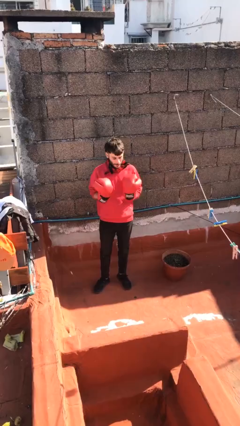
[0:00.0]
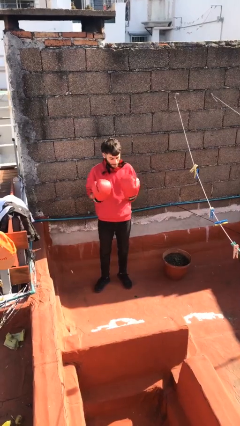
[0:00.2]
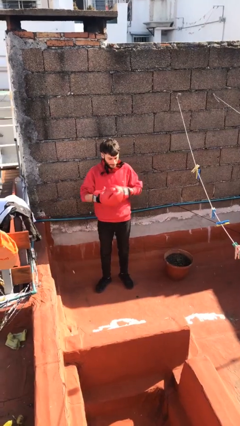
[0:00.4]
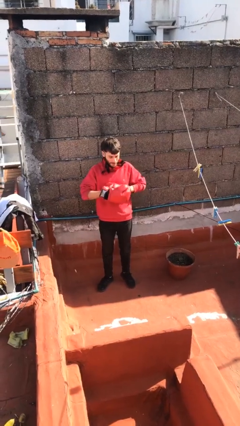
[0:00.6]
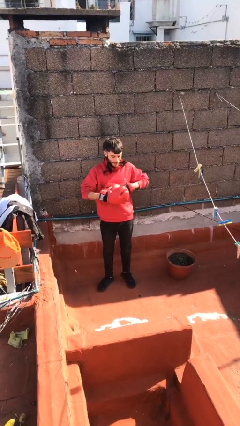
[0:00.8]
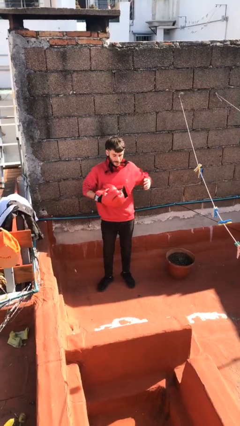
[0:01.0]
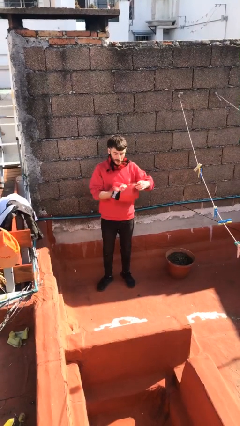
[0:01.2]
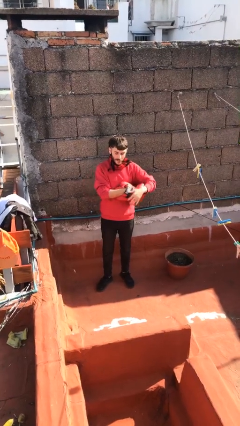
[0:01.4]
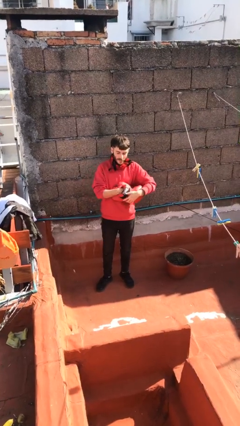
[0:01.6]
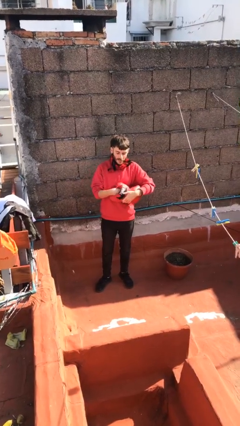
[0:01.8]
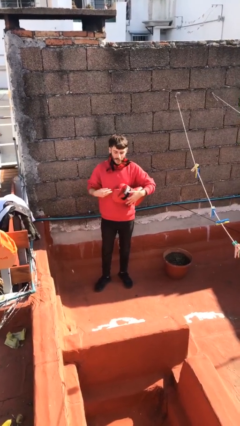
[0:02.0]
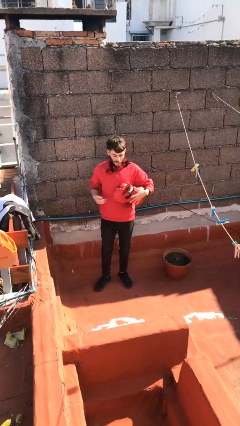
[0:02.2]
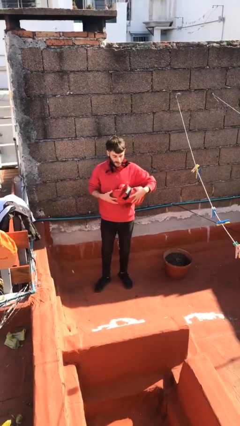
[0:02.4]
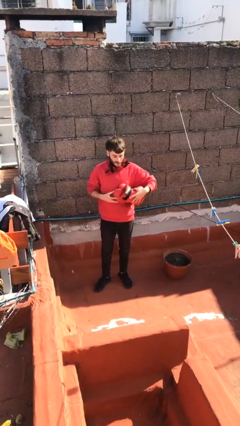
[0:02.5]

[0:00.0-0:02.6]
person takes off gloves

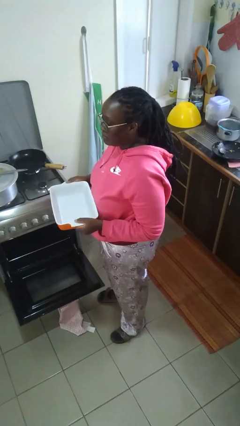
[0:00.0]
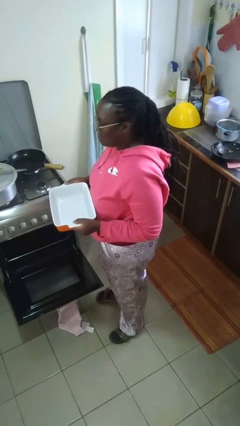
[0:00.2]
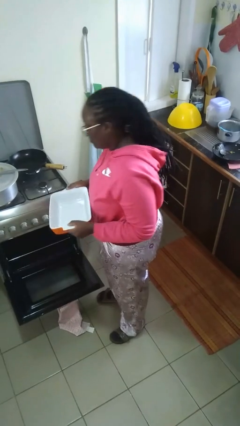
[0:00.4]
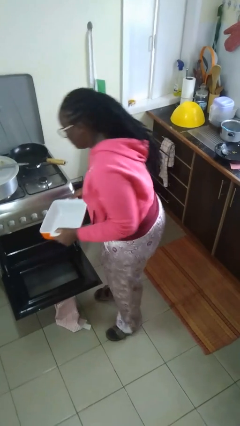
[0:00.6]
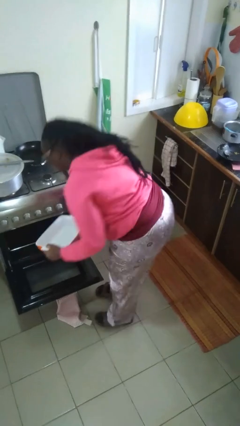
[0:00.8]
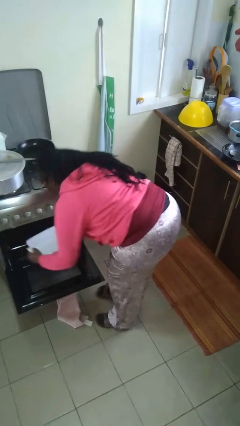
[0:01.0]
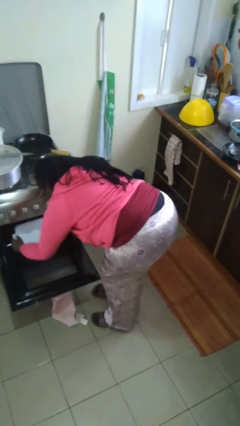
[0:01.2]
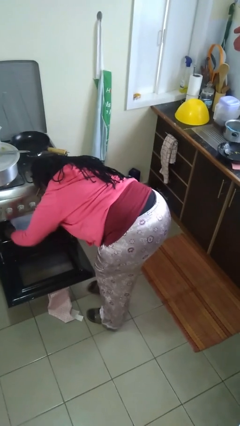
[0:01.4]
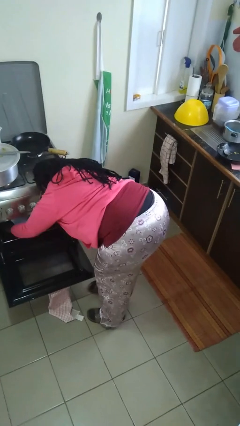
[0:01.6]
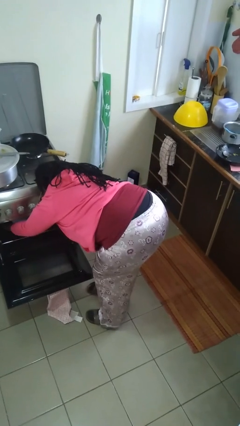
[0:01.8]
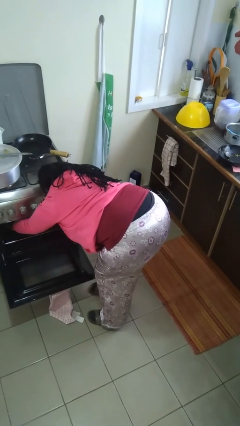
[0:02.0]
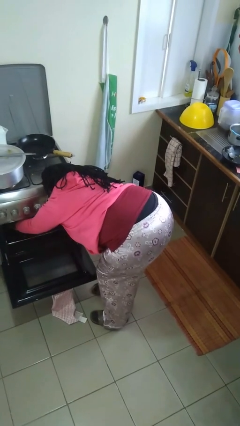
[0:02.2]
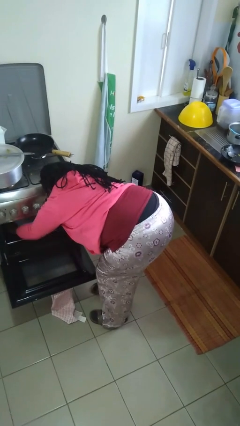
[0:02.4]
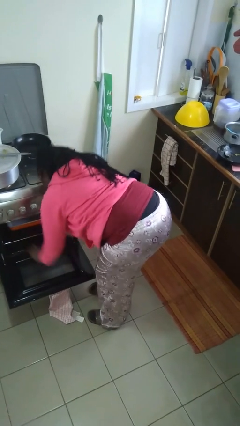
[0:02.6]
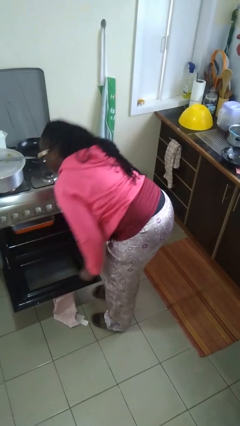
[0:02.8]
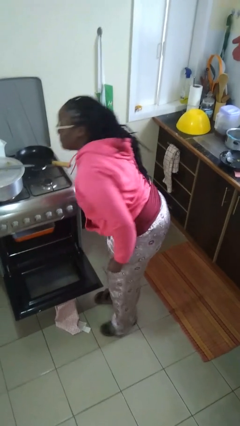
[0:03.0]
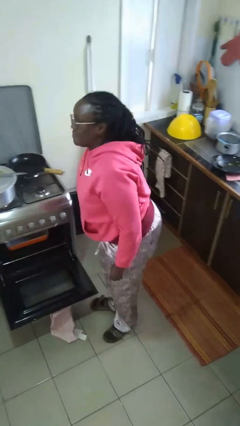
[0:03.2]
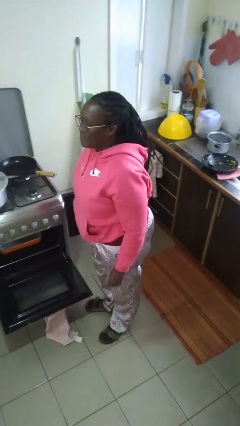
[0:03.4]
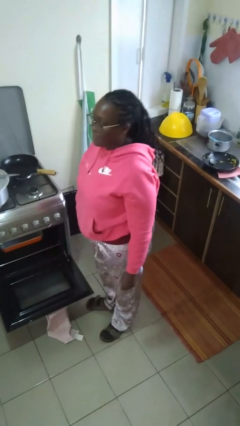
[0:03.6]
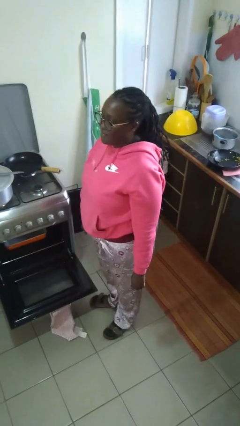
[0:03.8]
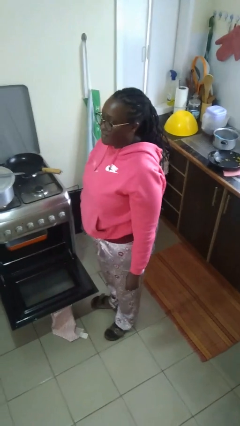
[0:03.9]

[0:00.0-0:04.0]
person puts object into oven

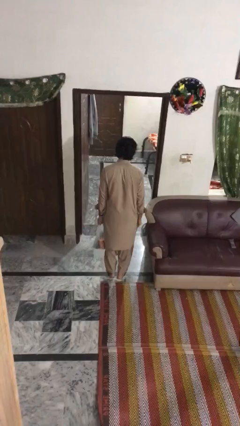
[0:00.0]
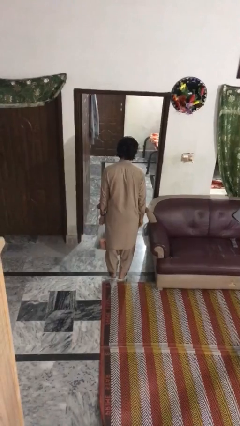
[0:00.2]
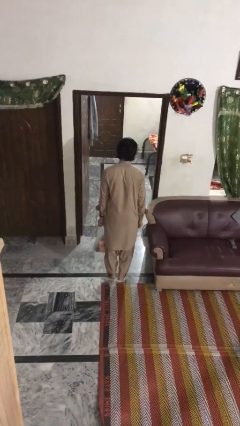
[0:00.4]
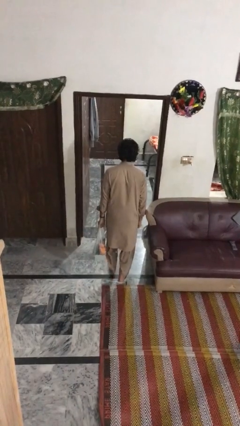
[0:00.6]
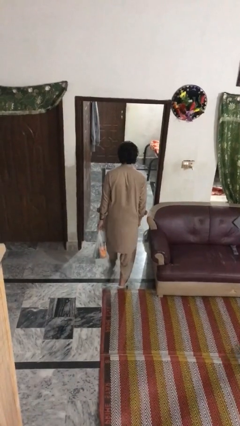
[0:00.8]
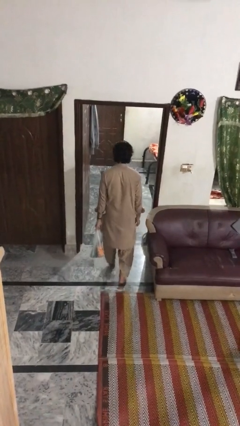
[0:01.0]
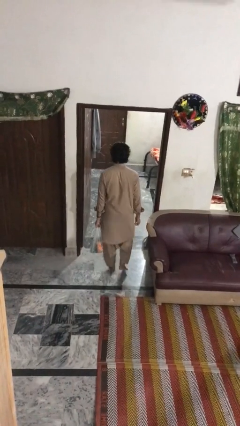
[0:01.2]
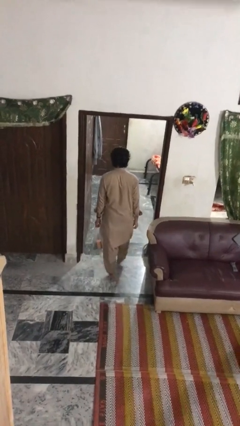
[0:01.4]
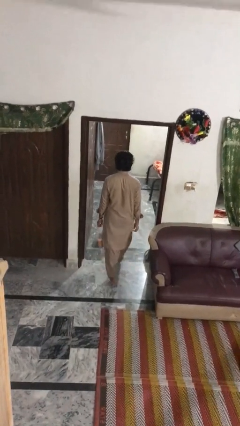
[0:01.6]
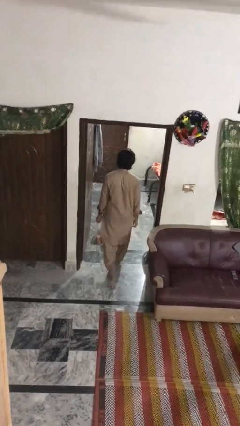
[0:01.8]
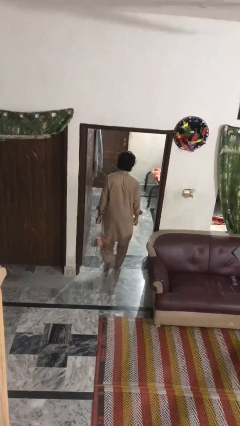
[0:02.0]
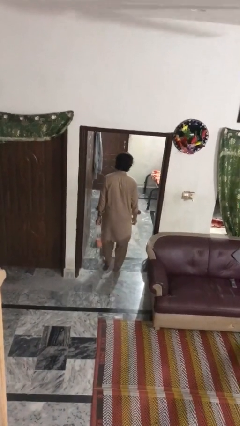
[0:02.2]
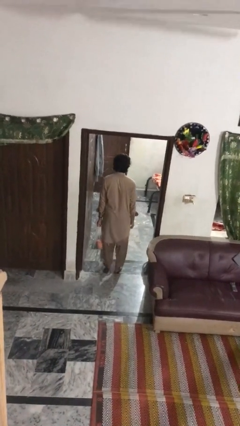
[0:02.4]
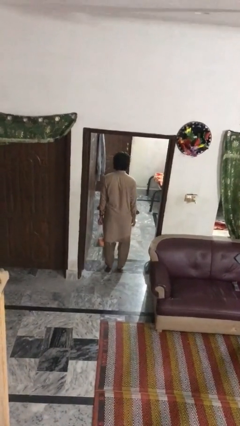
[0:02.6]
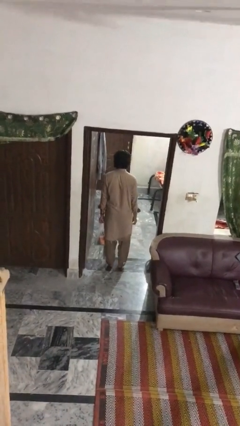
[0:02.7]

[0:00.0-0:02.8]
person carries groceries

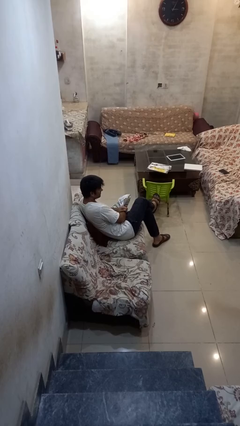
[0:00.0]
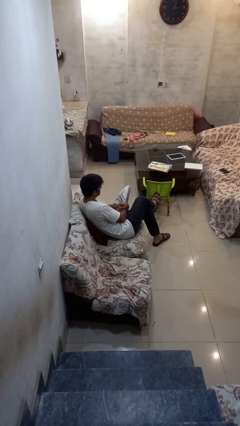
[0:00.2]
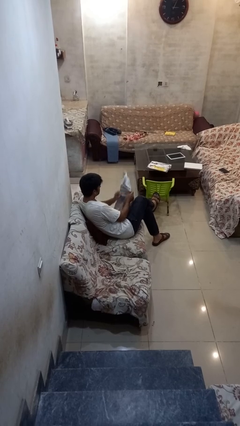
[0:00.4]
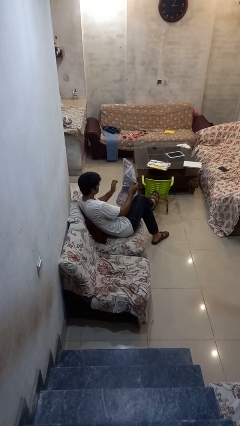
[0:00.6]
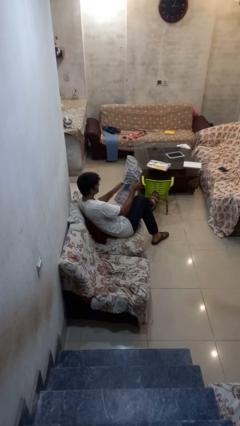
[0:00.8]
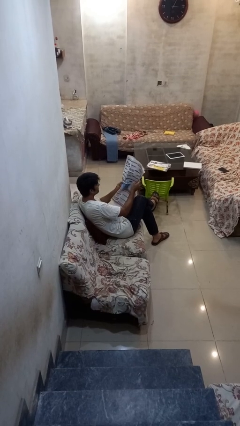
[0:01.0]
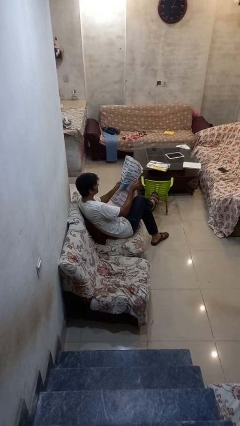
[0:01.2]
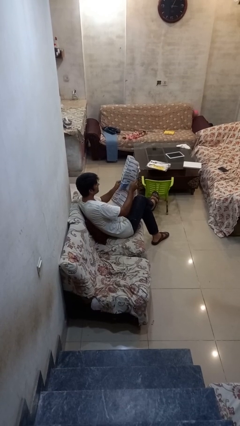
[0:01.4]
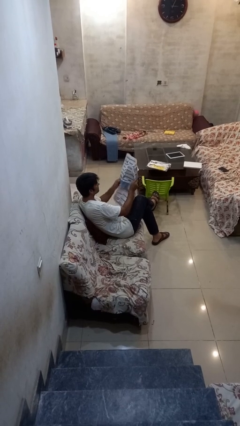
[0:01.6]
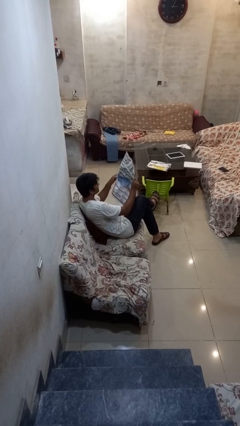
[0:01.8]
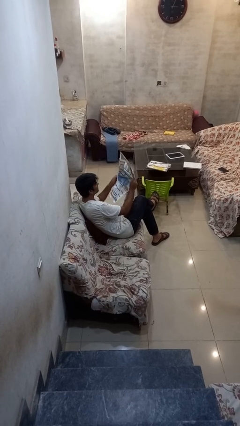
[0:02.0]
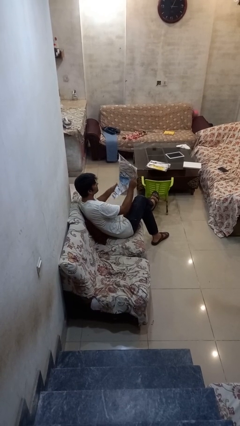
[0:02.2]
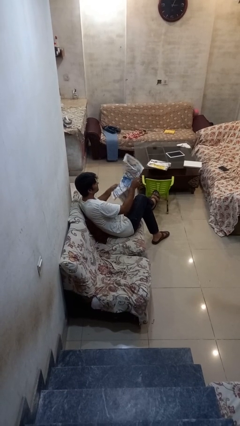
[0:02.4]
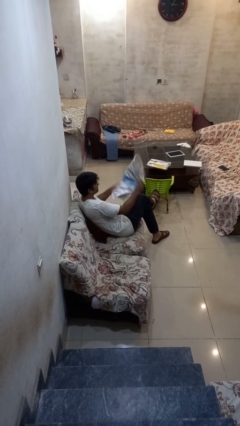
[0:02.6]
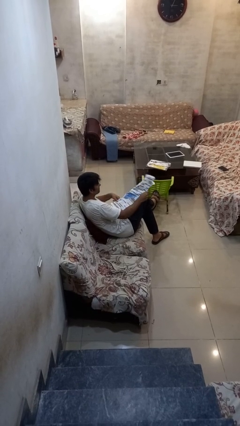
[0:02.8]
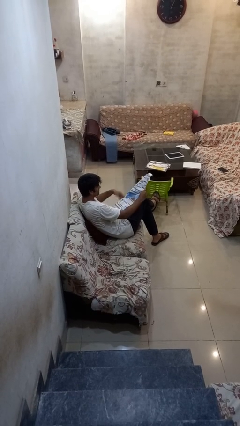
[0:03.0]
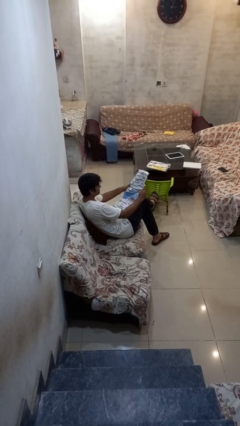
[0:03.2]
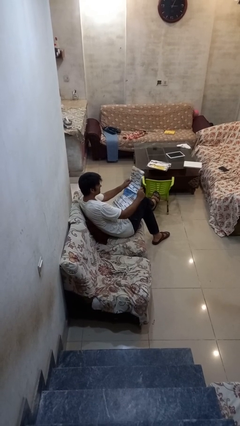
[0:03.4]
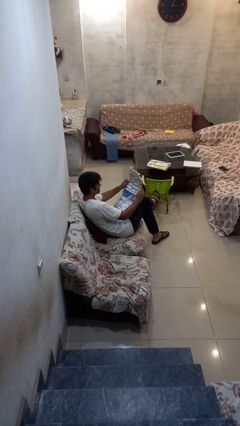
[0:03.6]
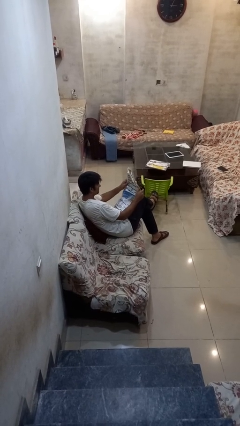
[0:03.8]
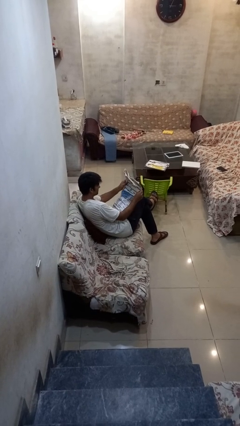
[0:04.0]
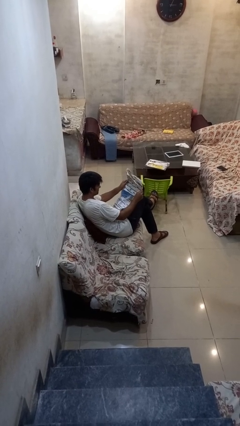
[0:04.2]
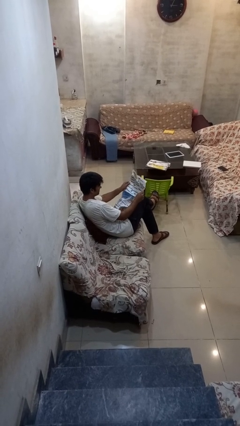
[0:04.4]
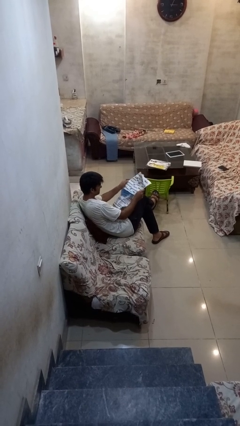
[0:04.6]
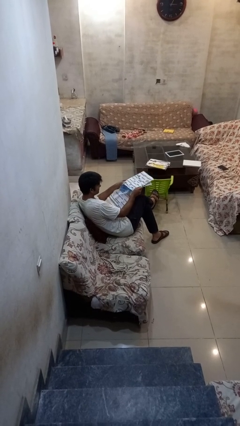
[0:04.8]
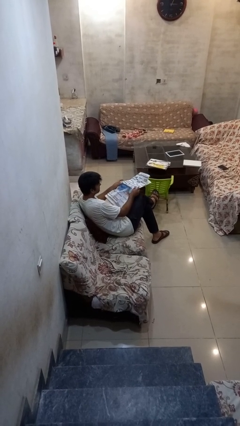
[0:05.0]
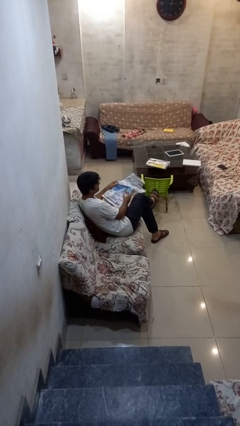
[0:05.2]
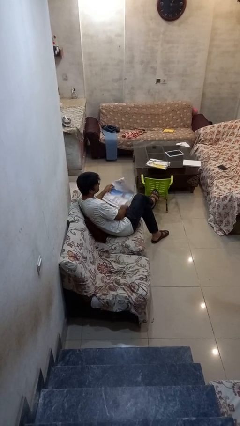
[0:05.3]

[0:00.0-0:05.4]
person reads newspaper

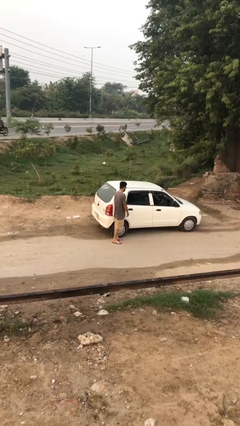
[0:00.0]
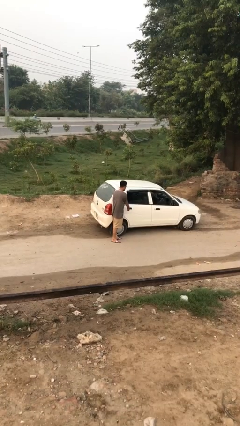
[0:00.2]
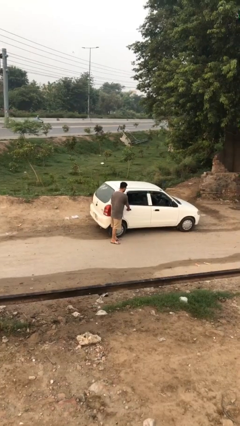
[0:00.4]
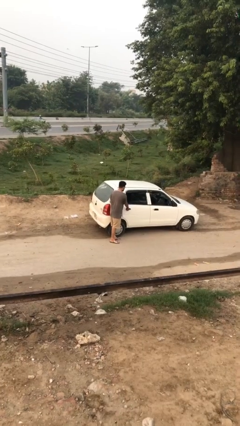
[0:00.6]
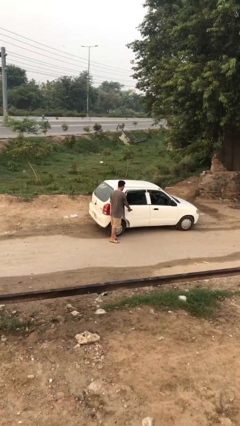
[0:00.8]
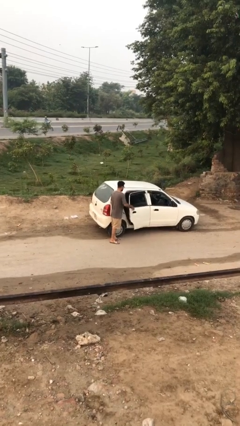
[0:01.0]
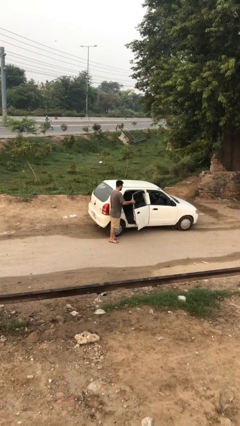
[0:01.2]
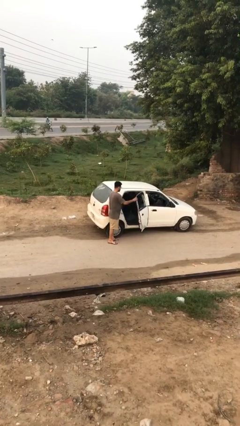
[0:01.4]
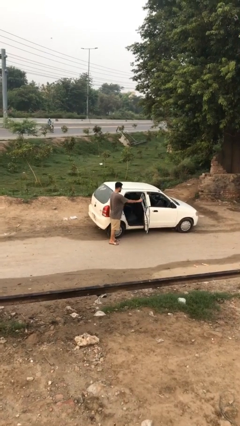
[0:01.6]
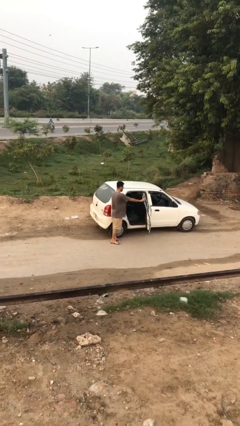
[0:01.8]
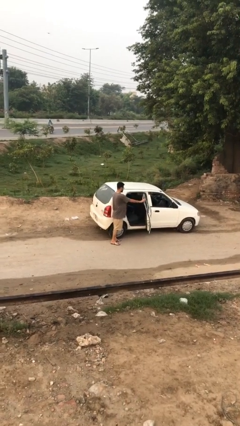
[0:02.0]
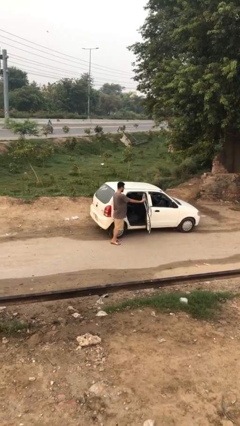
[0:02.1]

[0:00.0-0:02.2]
person opens car door
